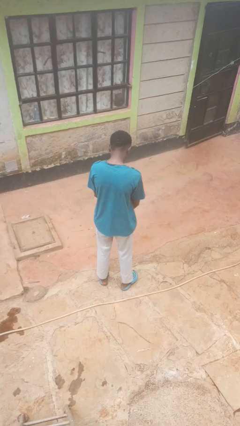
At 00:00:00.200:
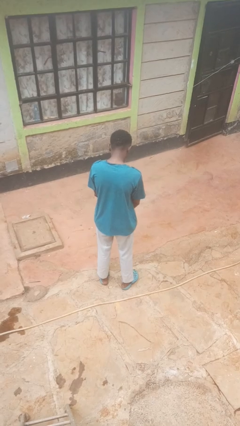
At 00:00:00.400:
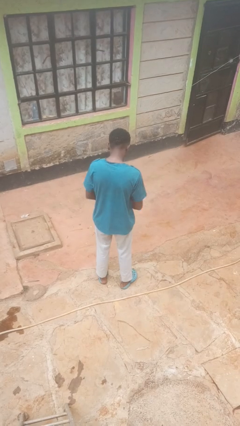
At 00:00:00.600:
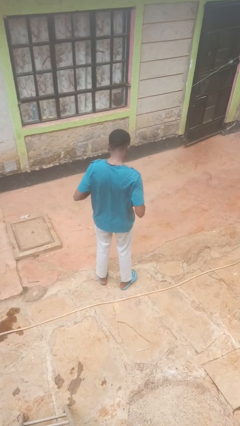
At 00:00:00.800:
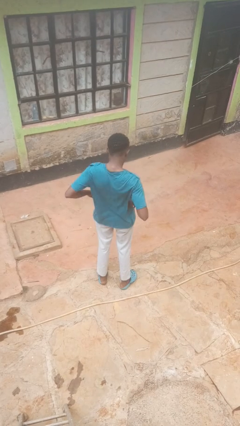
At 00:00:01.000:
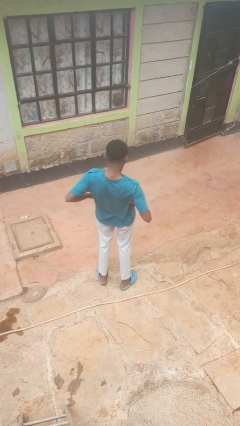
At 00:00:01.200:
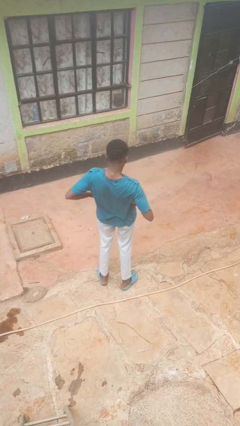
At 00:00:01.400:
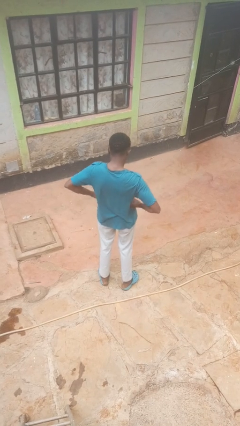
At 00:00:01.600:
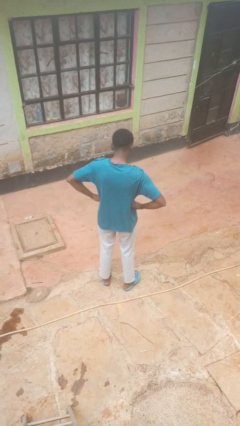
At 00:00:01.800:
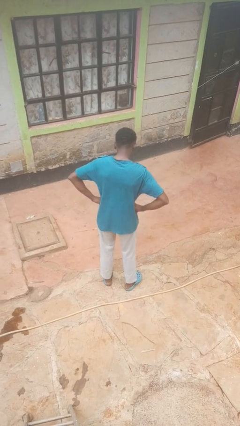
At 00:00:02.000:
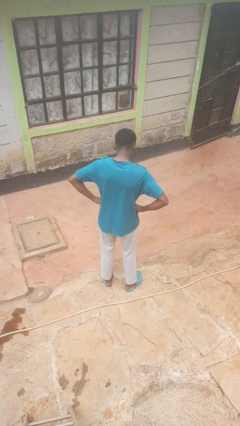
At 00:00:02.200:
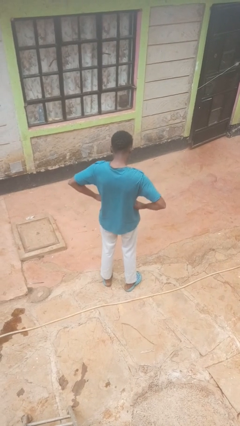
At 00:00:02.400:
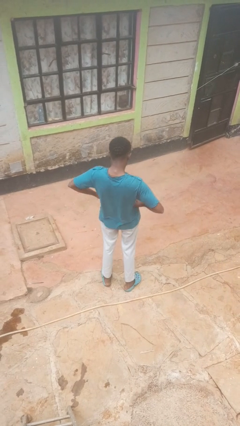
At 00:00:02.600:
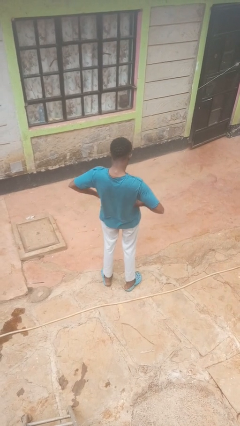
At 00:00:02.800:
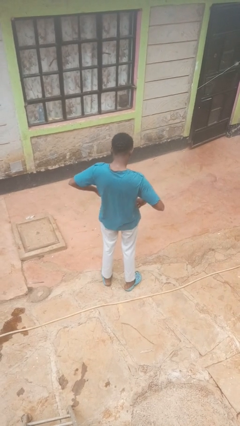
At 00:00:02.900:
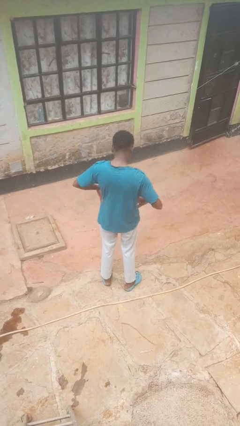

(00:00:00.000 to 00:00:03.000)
person wiggles hips

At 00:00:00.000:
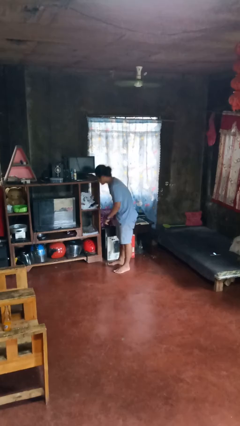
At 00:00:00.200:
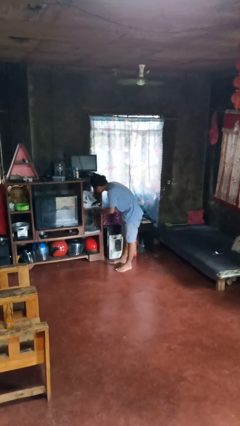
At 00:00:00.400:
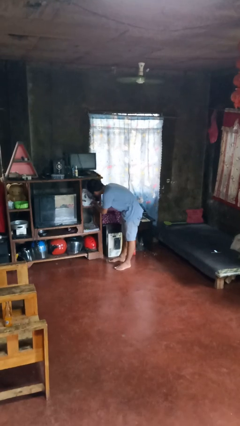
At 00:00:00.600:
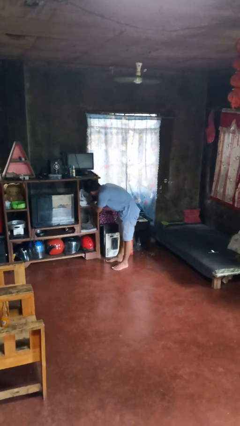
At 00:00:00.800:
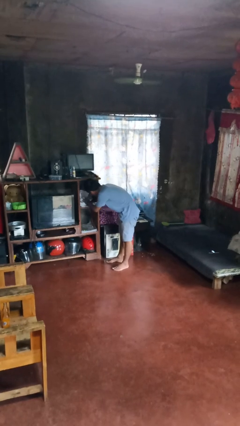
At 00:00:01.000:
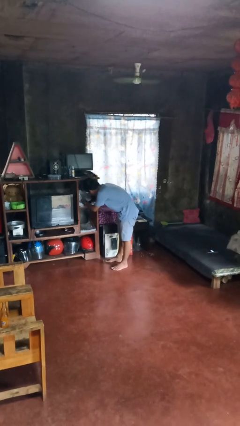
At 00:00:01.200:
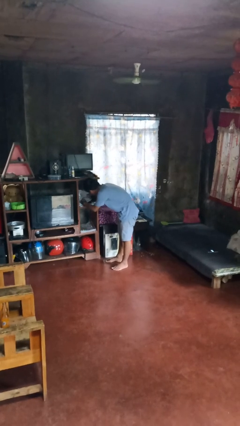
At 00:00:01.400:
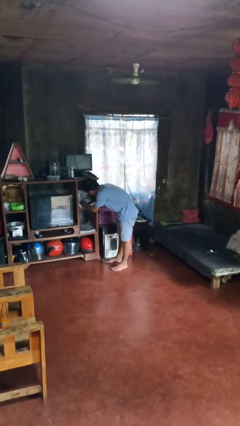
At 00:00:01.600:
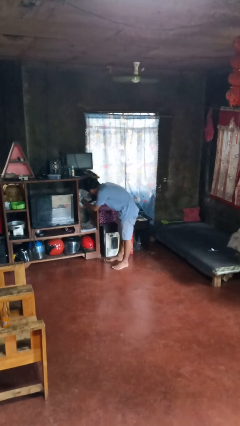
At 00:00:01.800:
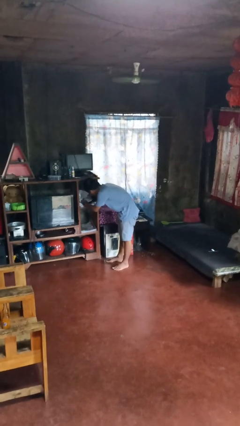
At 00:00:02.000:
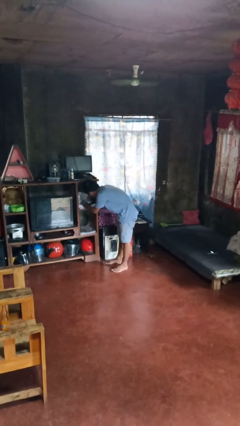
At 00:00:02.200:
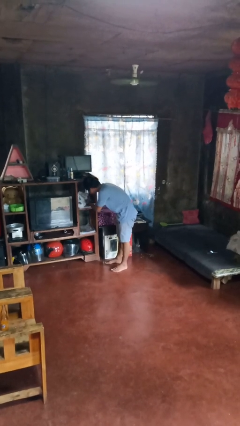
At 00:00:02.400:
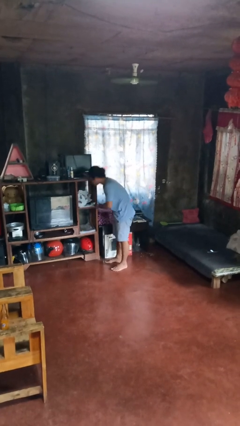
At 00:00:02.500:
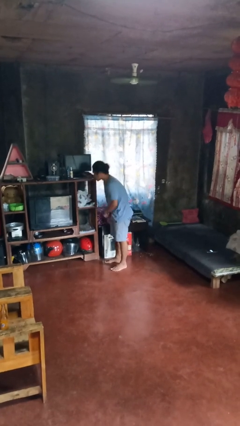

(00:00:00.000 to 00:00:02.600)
person searches in cabinet

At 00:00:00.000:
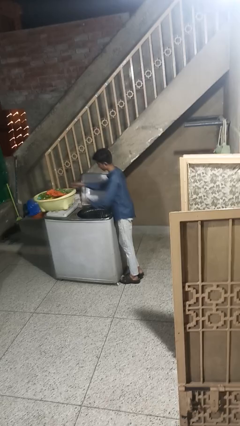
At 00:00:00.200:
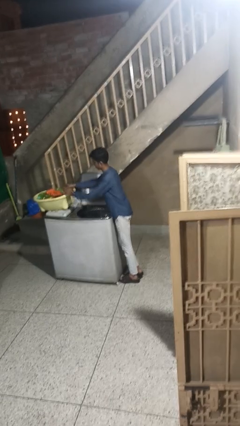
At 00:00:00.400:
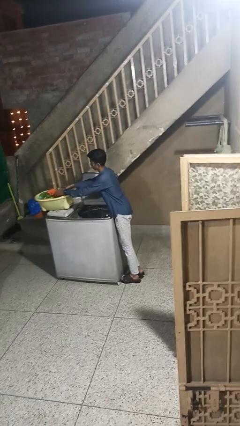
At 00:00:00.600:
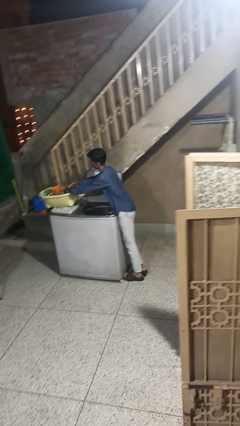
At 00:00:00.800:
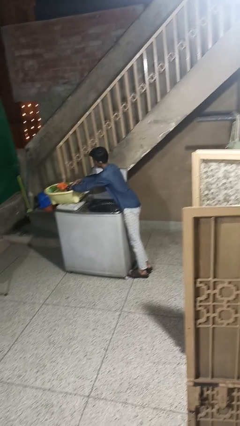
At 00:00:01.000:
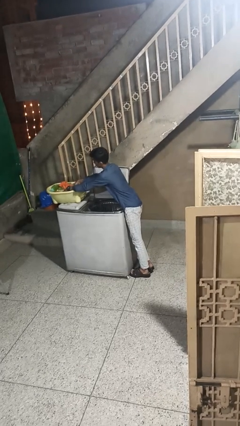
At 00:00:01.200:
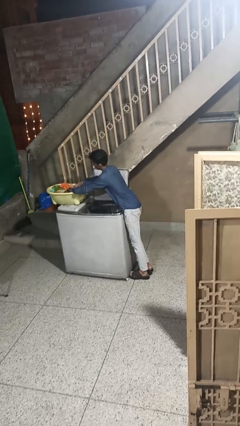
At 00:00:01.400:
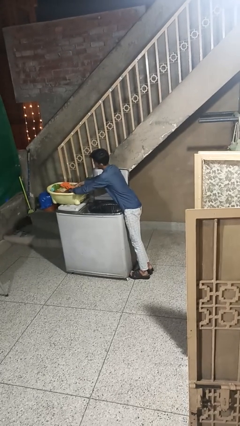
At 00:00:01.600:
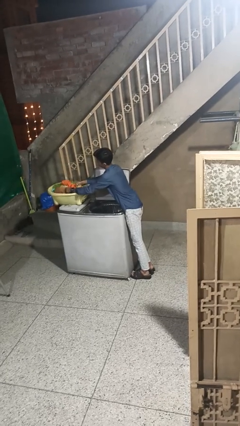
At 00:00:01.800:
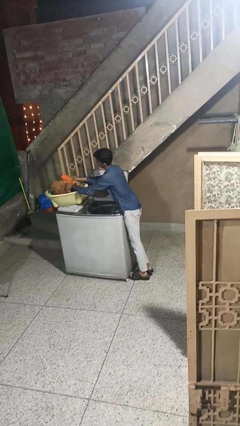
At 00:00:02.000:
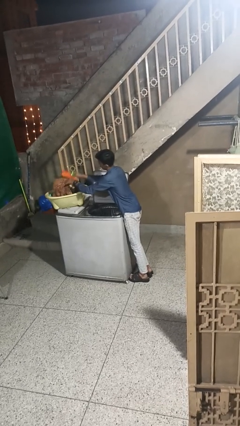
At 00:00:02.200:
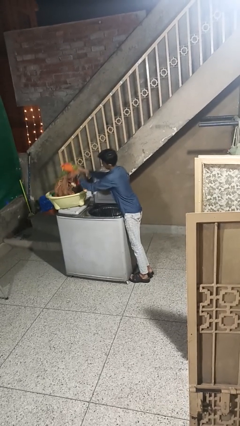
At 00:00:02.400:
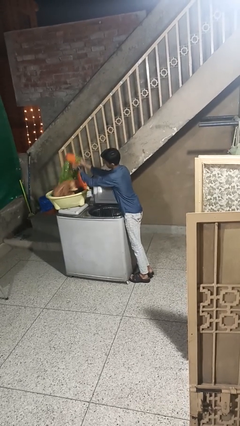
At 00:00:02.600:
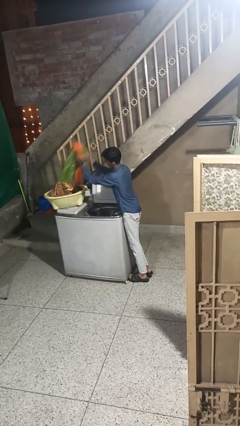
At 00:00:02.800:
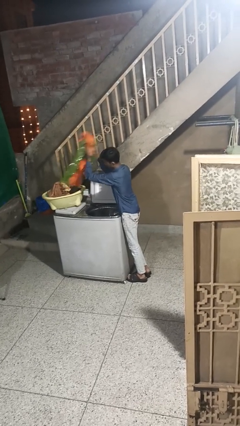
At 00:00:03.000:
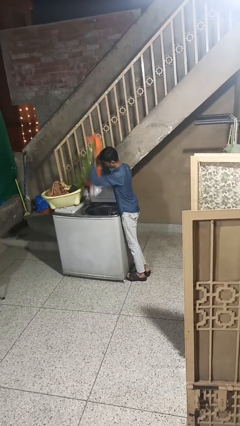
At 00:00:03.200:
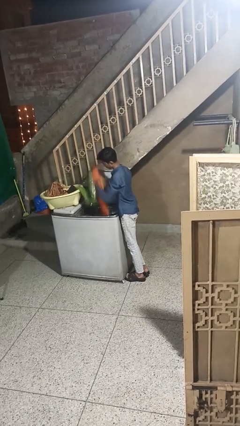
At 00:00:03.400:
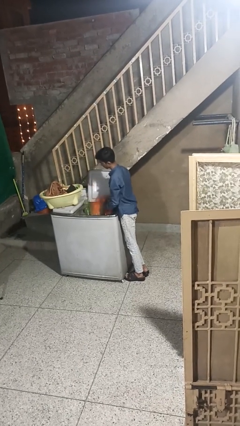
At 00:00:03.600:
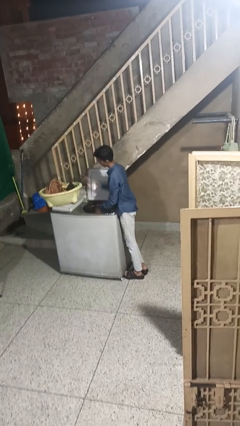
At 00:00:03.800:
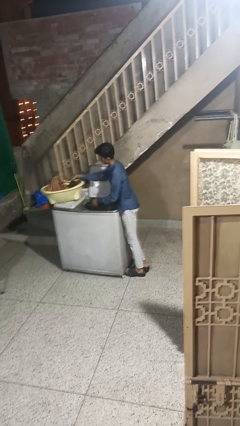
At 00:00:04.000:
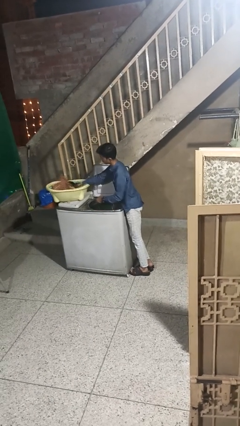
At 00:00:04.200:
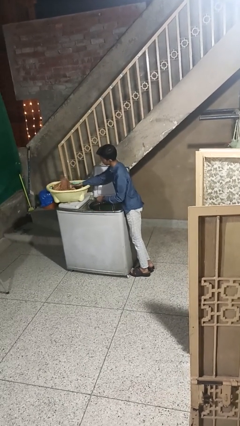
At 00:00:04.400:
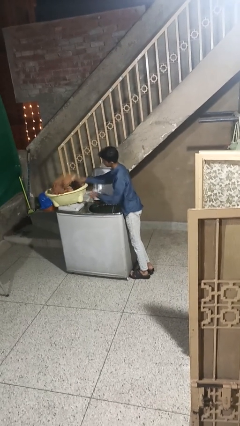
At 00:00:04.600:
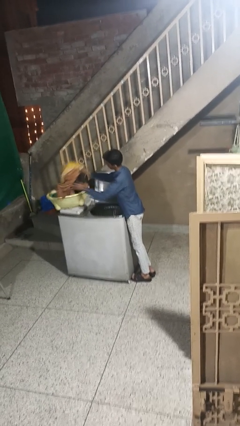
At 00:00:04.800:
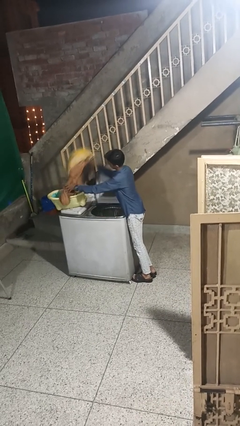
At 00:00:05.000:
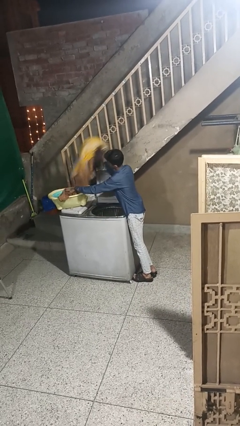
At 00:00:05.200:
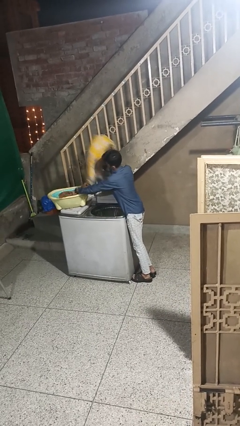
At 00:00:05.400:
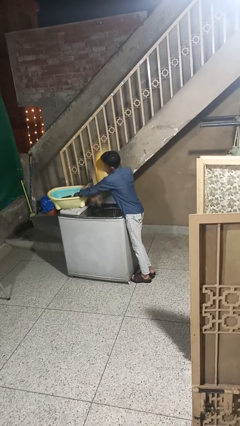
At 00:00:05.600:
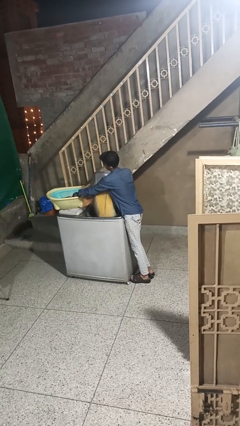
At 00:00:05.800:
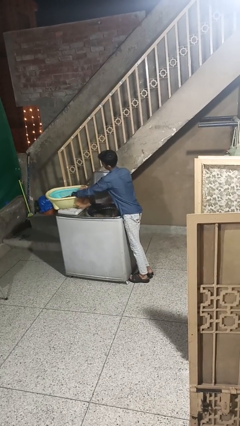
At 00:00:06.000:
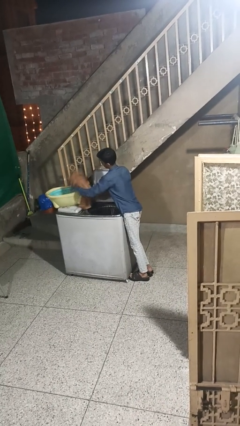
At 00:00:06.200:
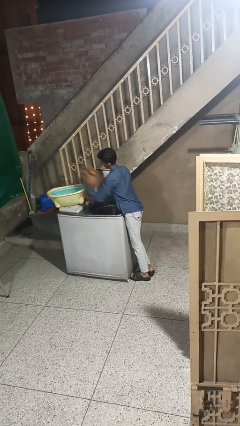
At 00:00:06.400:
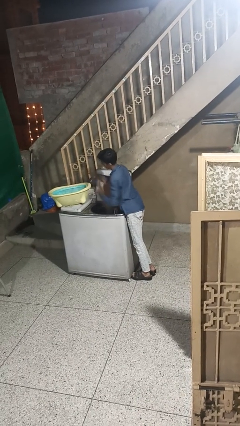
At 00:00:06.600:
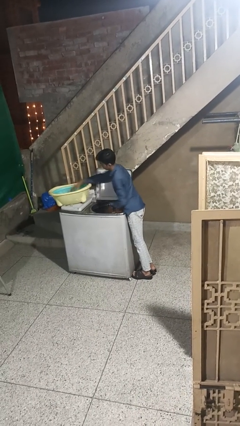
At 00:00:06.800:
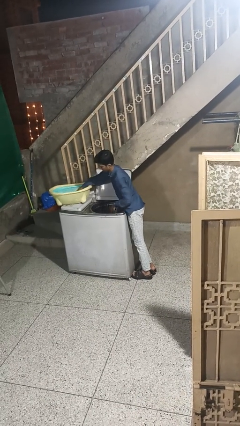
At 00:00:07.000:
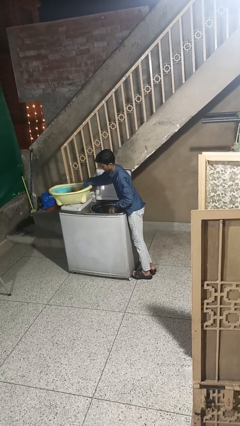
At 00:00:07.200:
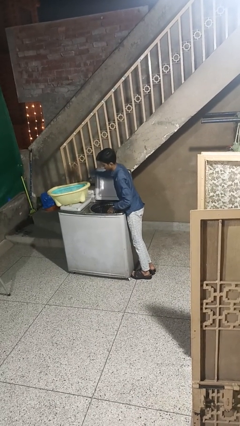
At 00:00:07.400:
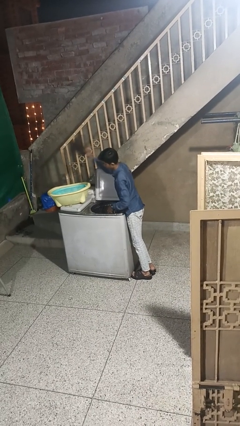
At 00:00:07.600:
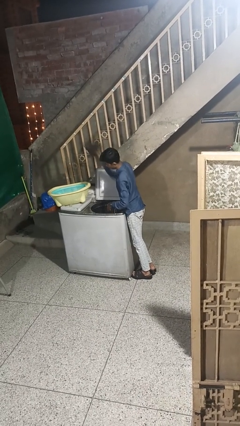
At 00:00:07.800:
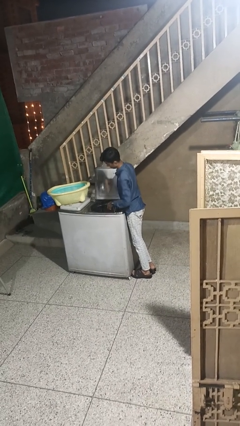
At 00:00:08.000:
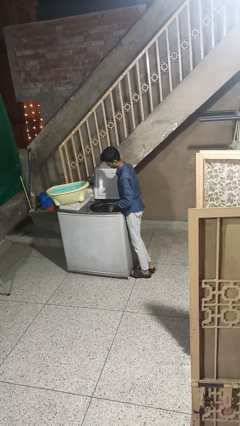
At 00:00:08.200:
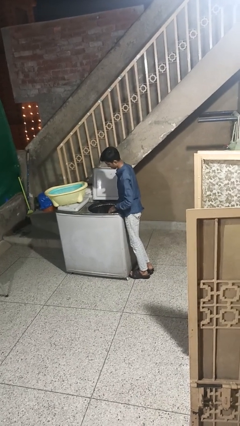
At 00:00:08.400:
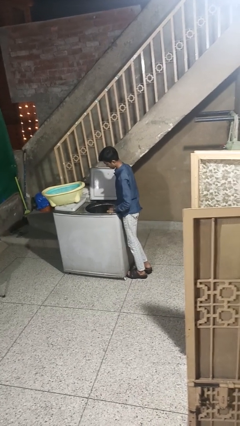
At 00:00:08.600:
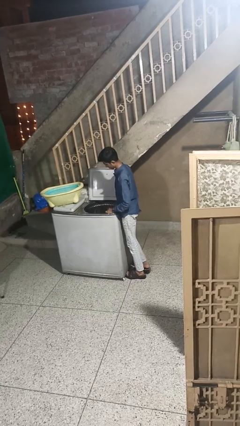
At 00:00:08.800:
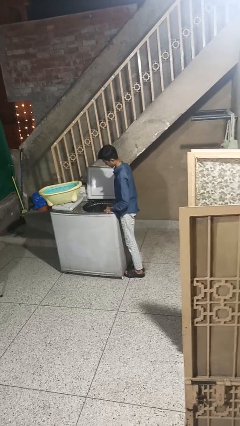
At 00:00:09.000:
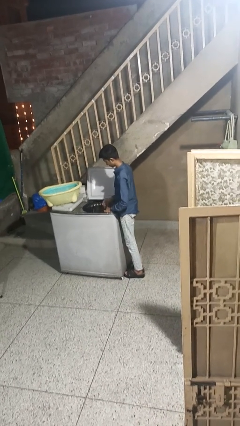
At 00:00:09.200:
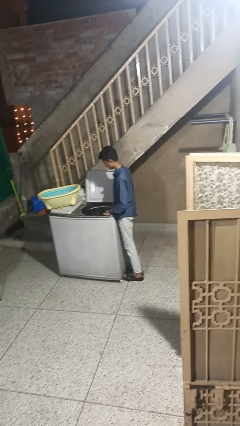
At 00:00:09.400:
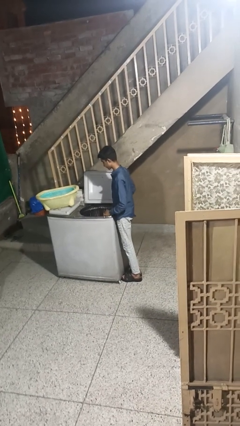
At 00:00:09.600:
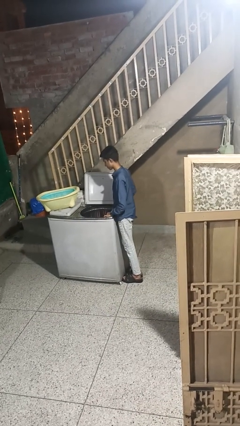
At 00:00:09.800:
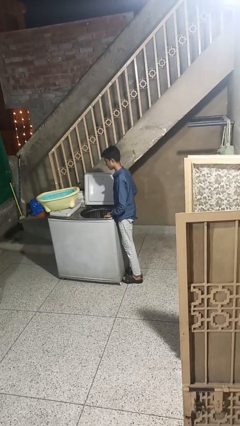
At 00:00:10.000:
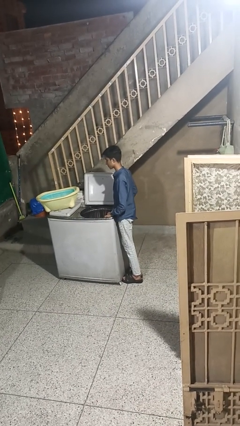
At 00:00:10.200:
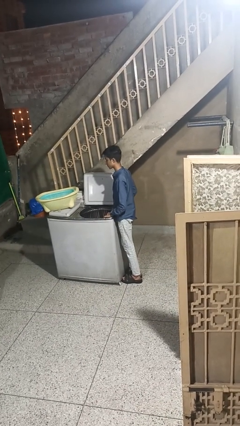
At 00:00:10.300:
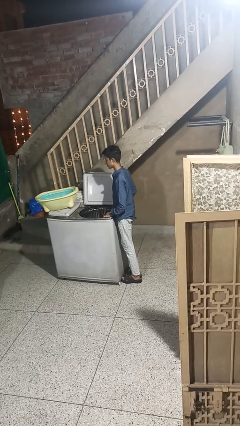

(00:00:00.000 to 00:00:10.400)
person unloads clotheswasher

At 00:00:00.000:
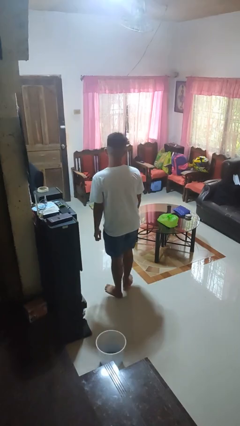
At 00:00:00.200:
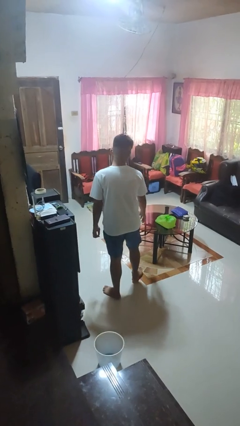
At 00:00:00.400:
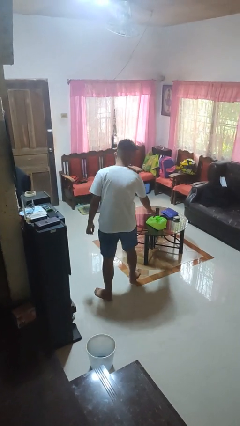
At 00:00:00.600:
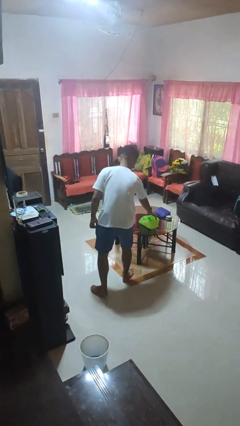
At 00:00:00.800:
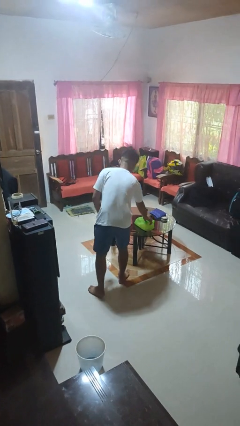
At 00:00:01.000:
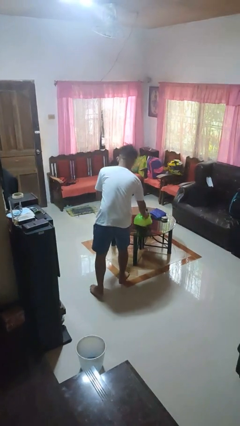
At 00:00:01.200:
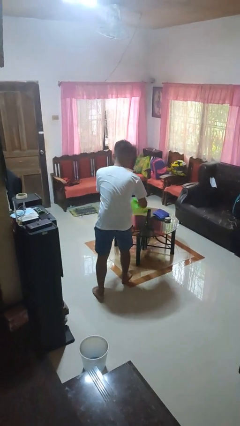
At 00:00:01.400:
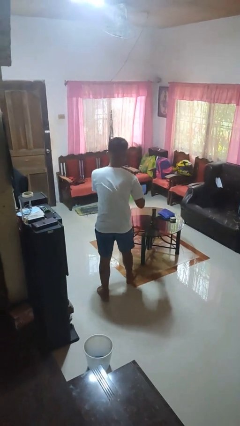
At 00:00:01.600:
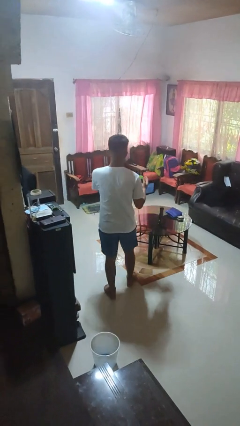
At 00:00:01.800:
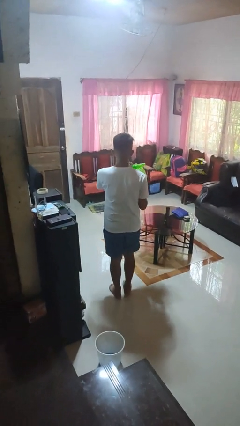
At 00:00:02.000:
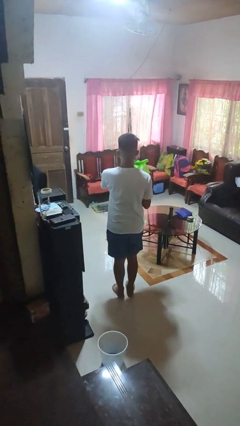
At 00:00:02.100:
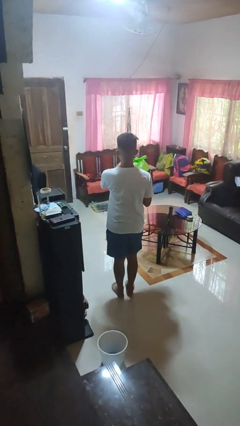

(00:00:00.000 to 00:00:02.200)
person picks up object from table
